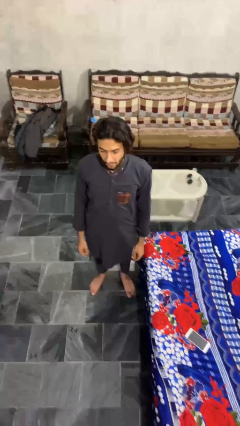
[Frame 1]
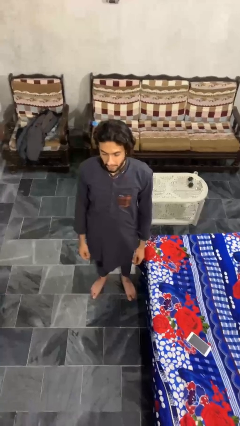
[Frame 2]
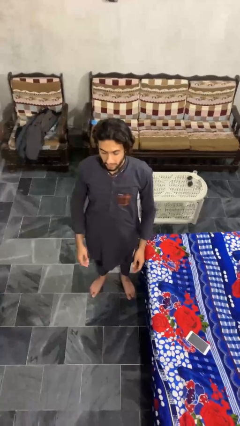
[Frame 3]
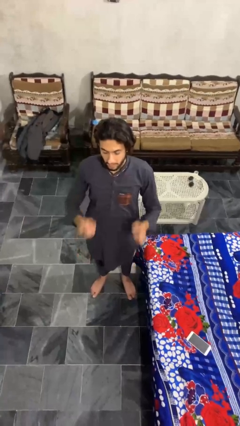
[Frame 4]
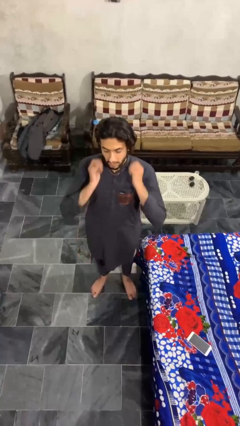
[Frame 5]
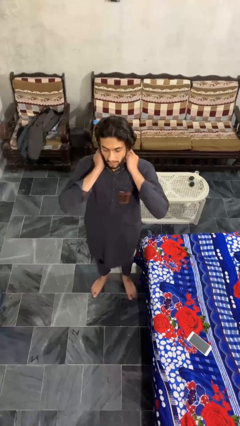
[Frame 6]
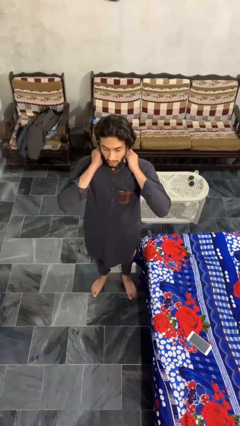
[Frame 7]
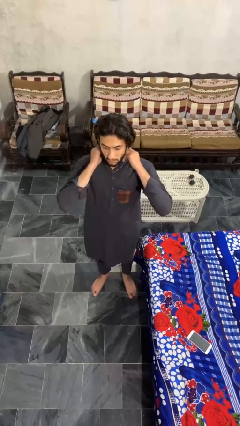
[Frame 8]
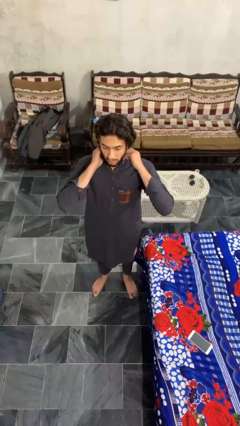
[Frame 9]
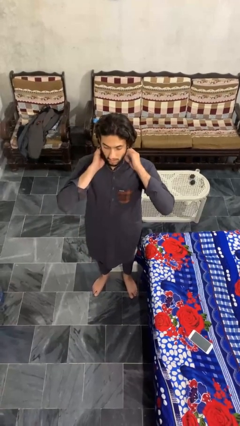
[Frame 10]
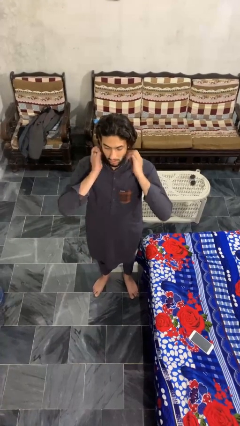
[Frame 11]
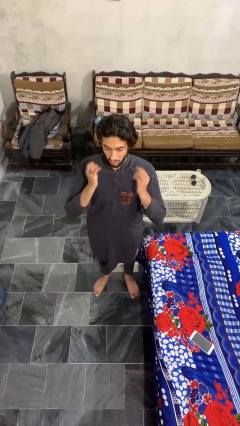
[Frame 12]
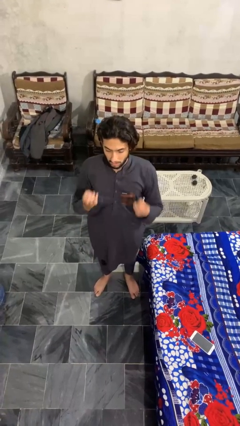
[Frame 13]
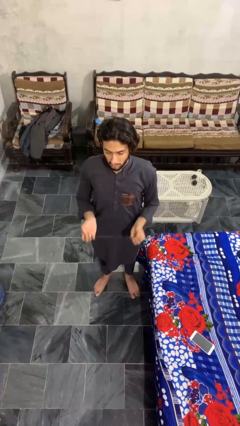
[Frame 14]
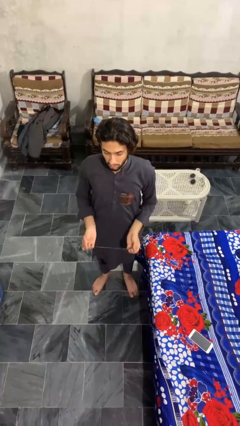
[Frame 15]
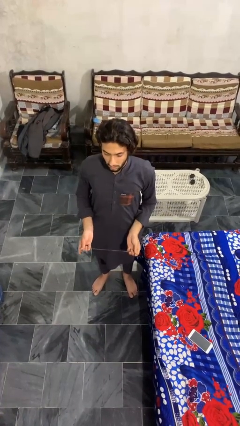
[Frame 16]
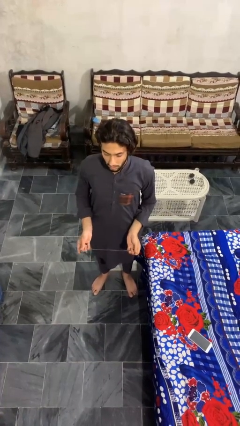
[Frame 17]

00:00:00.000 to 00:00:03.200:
person takes off necklace

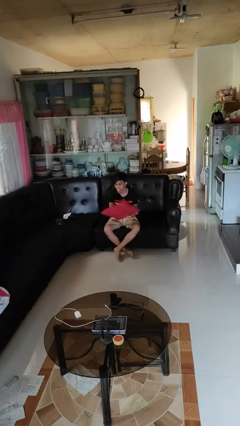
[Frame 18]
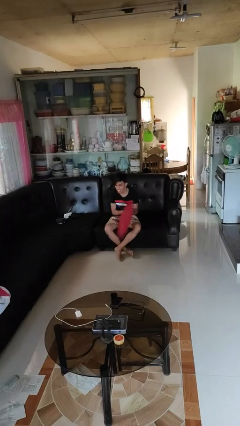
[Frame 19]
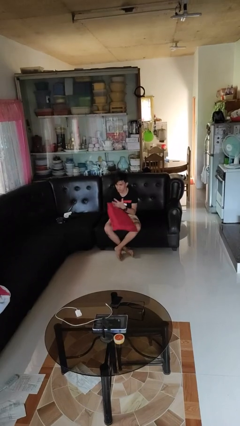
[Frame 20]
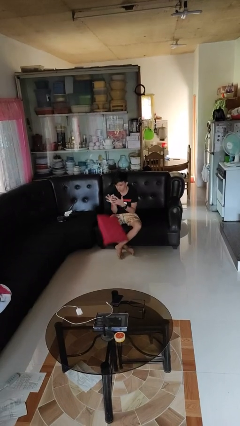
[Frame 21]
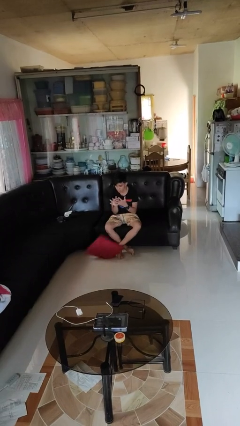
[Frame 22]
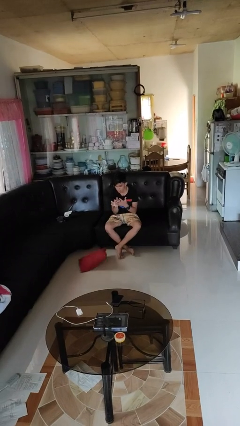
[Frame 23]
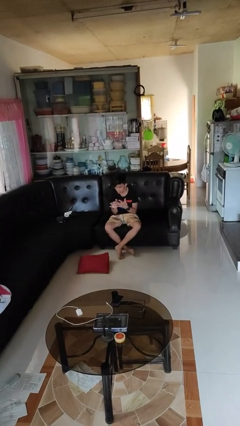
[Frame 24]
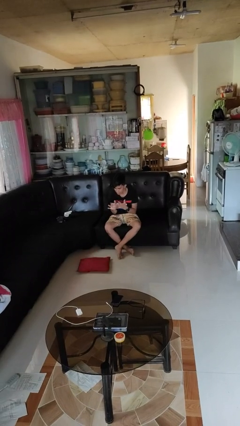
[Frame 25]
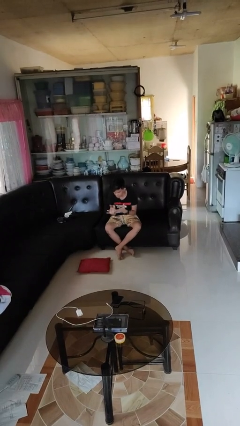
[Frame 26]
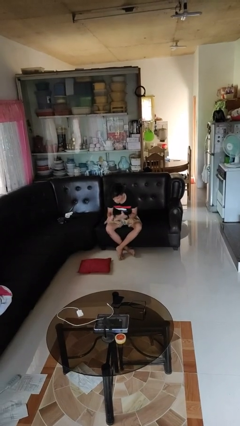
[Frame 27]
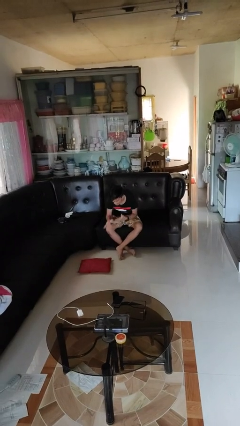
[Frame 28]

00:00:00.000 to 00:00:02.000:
person drops object

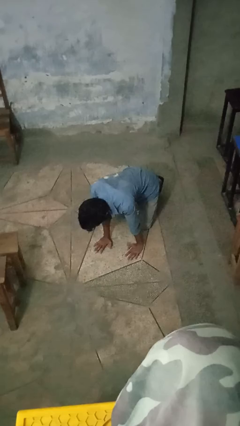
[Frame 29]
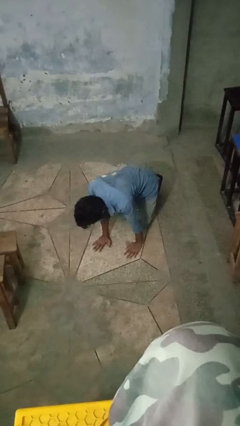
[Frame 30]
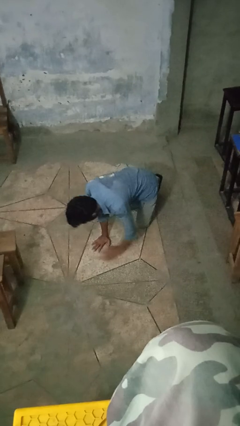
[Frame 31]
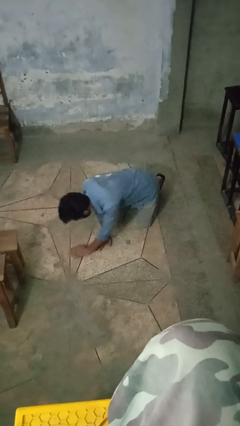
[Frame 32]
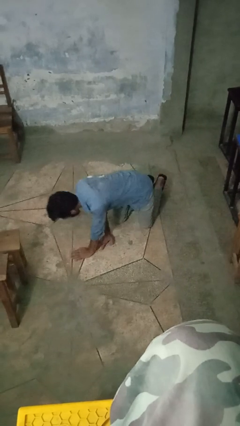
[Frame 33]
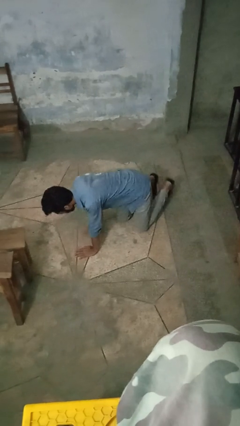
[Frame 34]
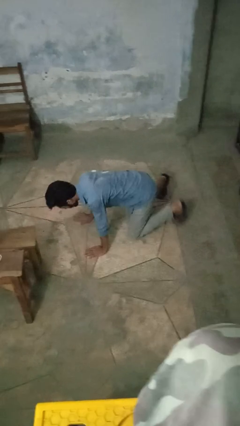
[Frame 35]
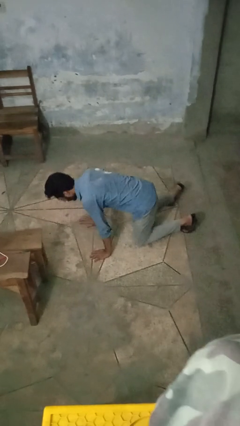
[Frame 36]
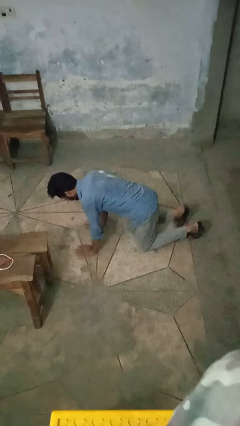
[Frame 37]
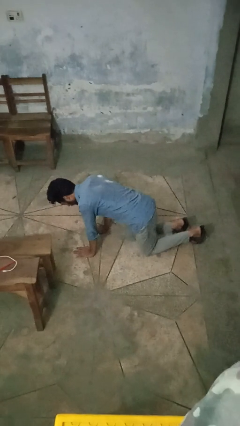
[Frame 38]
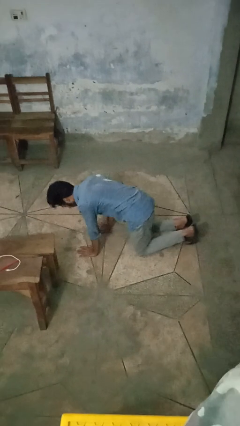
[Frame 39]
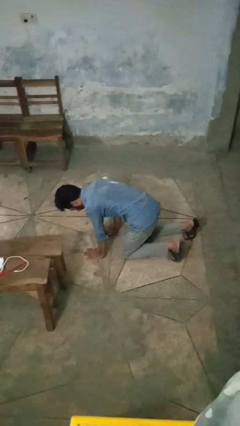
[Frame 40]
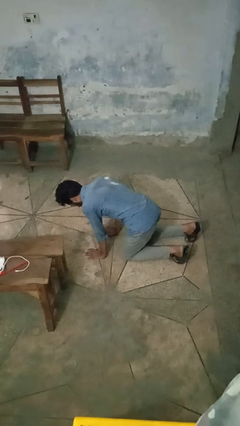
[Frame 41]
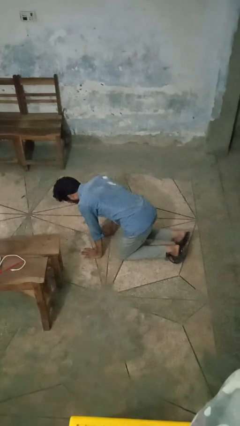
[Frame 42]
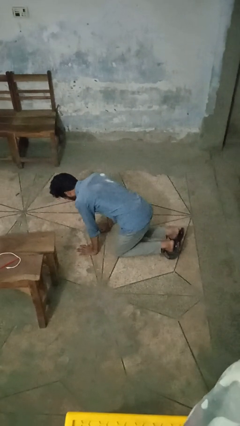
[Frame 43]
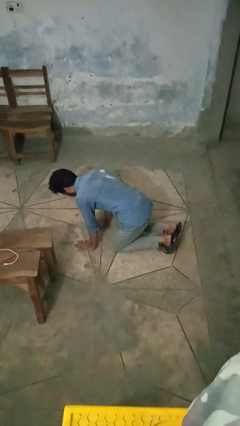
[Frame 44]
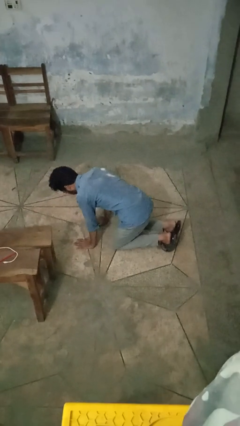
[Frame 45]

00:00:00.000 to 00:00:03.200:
person crawls

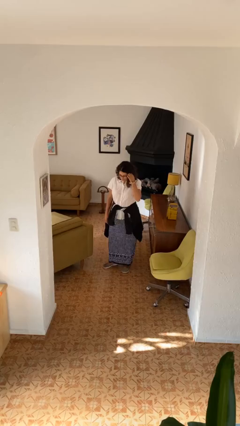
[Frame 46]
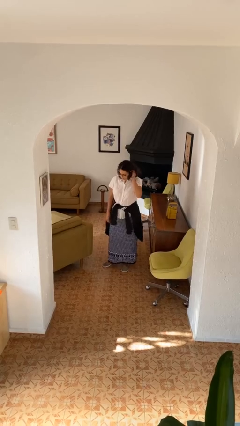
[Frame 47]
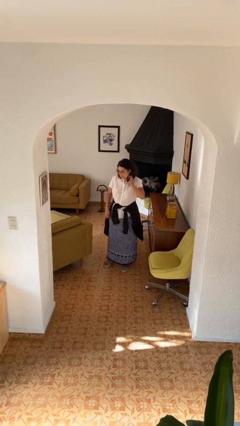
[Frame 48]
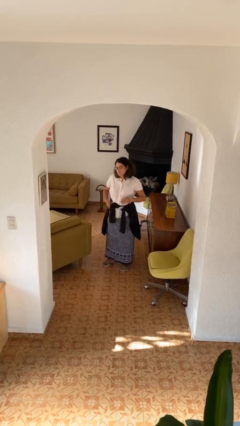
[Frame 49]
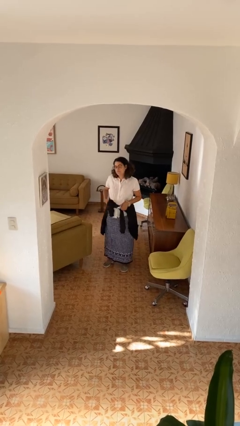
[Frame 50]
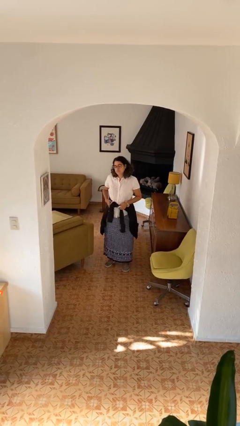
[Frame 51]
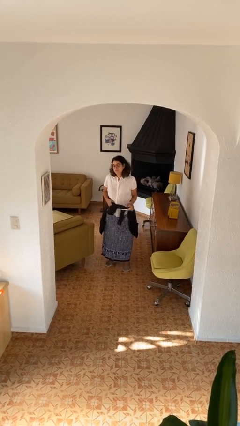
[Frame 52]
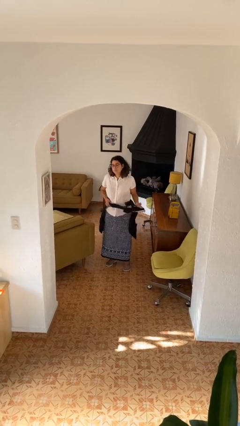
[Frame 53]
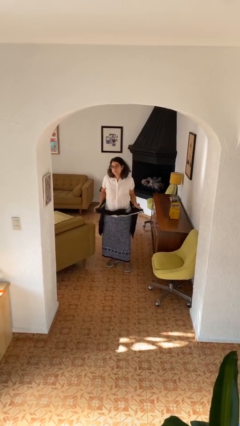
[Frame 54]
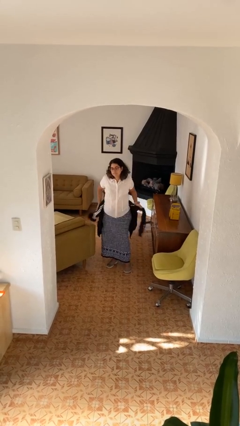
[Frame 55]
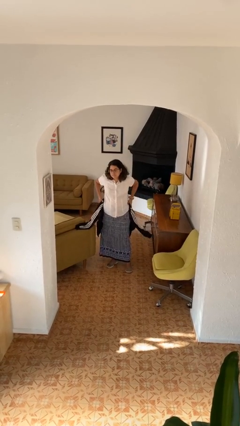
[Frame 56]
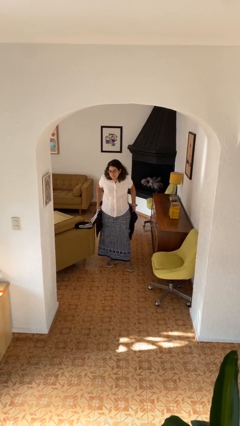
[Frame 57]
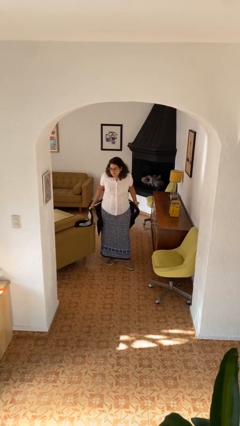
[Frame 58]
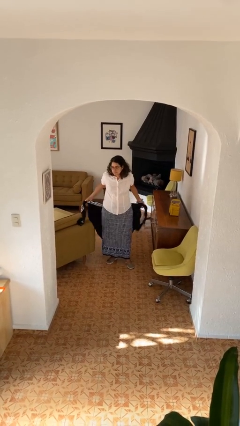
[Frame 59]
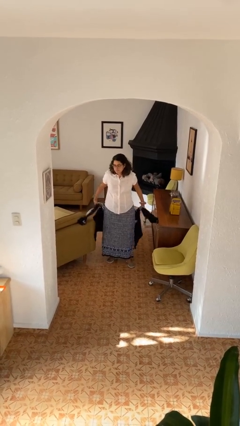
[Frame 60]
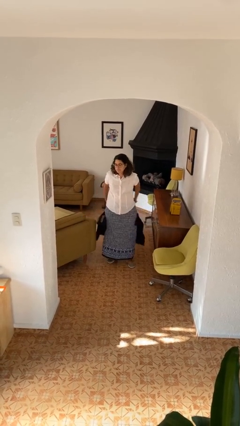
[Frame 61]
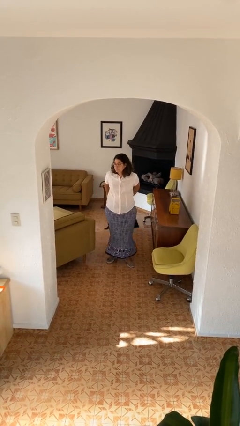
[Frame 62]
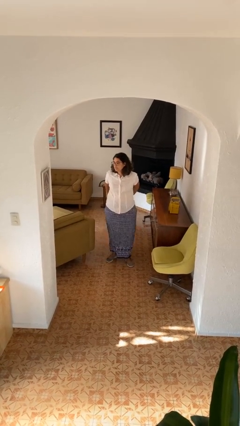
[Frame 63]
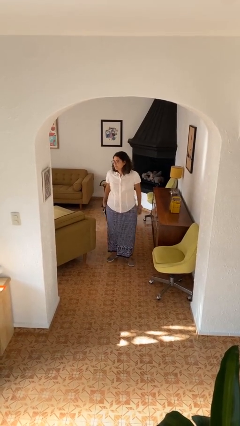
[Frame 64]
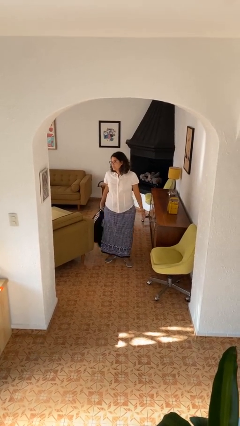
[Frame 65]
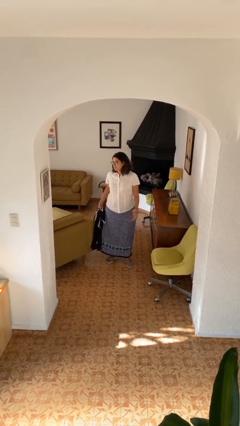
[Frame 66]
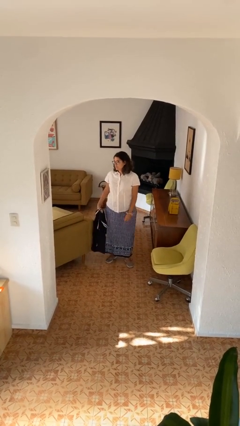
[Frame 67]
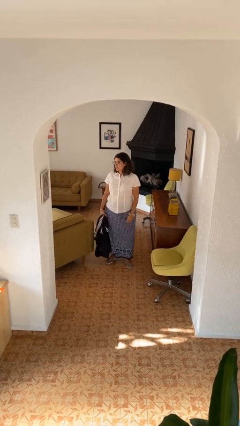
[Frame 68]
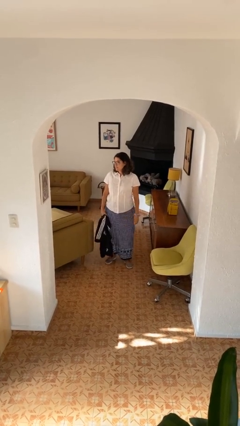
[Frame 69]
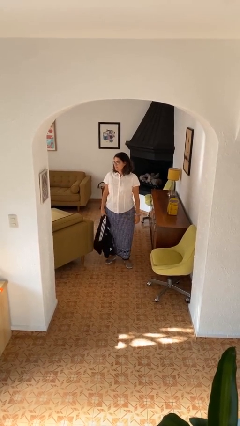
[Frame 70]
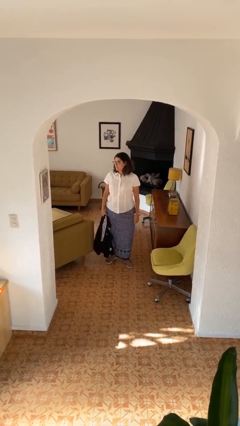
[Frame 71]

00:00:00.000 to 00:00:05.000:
person unties jacket around waist

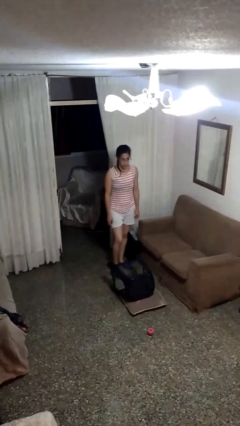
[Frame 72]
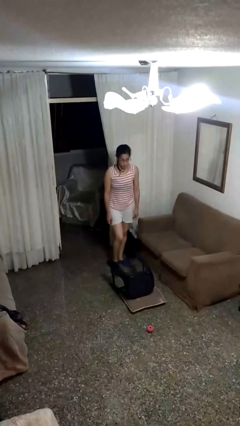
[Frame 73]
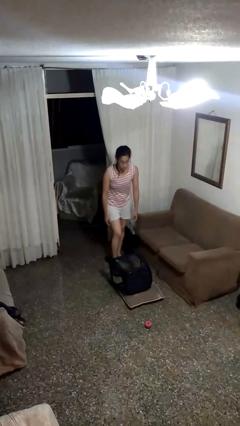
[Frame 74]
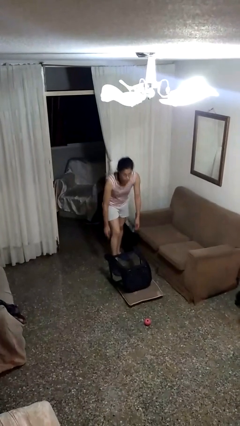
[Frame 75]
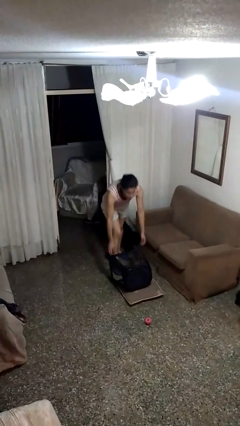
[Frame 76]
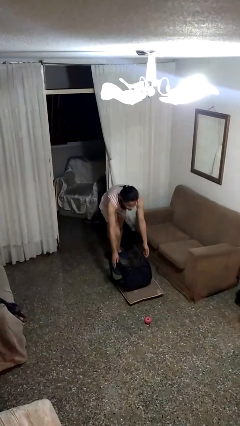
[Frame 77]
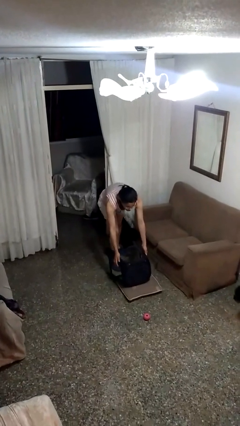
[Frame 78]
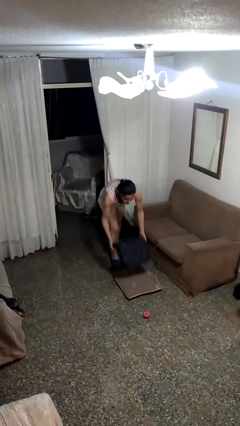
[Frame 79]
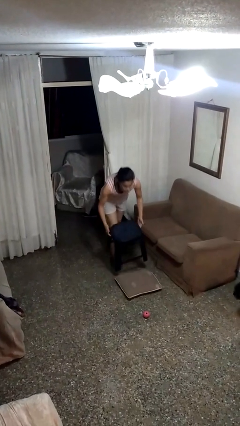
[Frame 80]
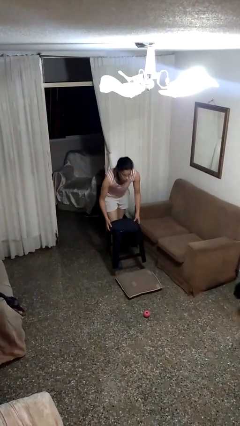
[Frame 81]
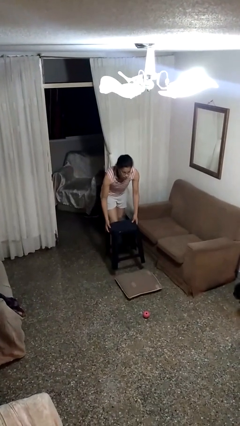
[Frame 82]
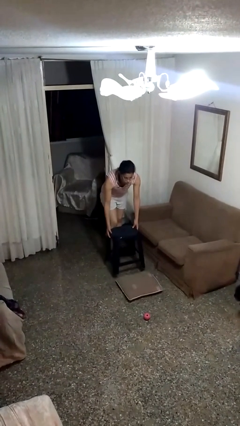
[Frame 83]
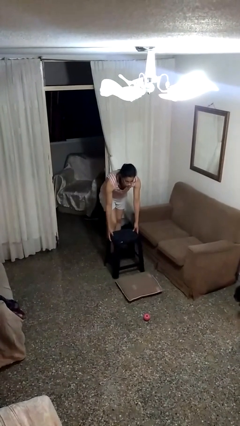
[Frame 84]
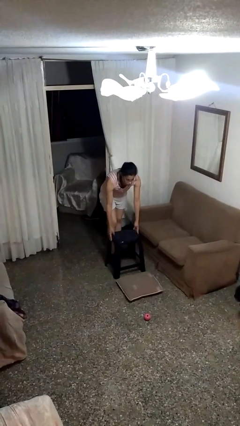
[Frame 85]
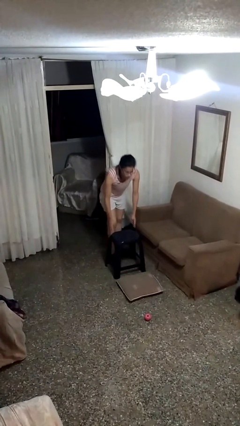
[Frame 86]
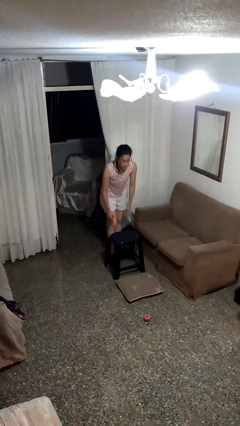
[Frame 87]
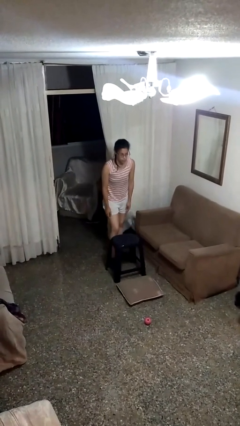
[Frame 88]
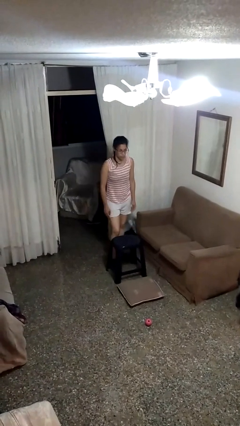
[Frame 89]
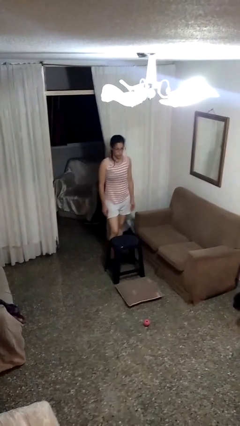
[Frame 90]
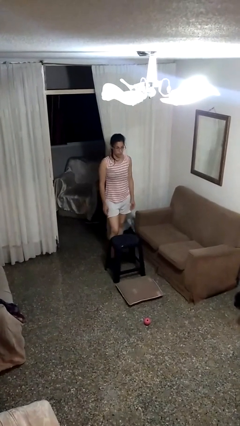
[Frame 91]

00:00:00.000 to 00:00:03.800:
person sets upright furniture
